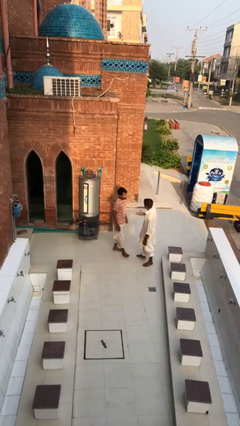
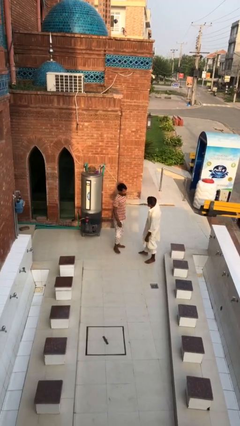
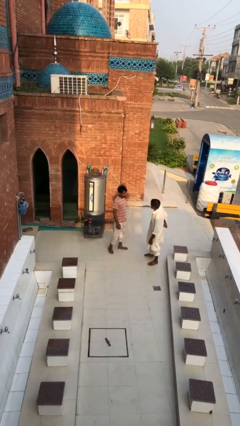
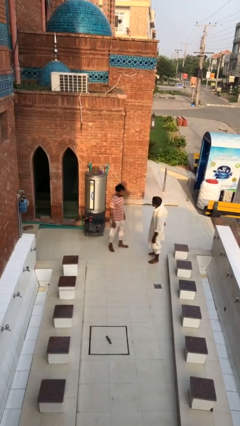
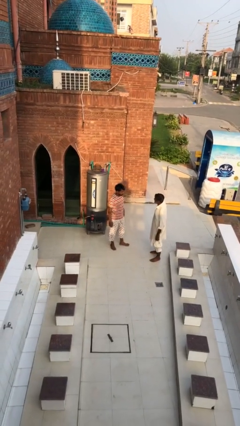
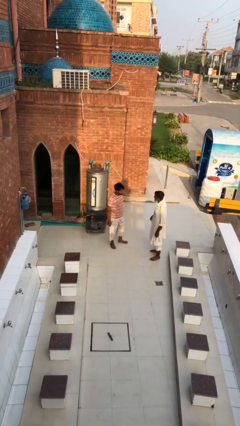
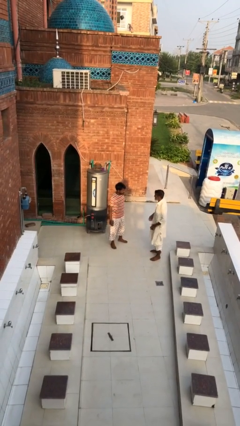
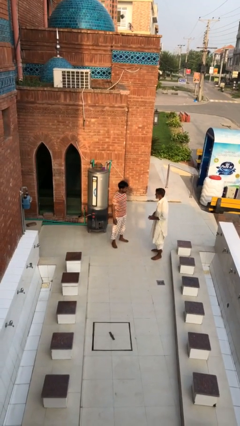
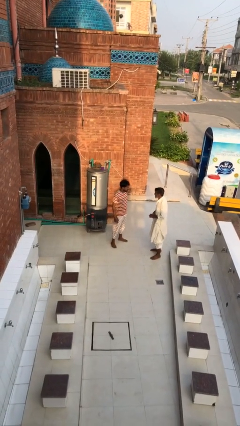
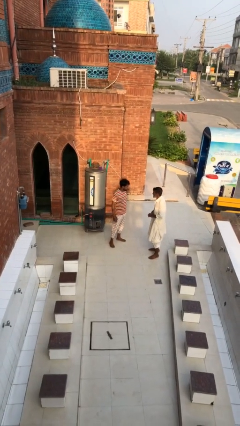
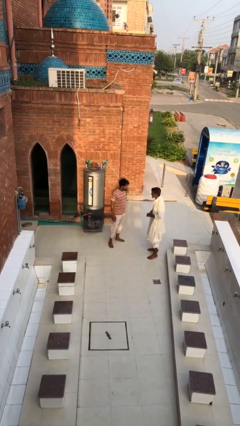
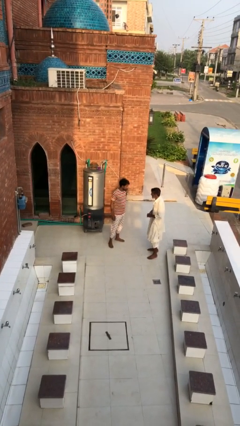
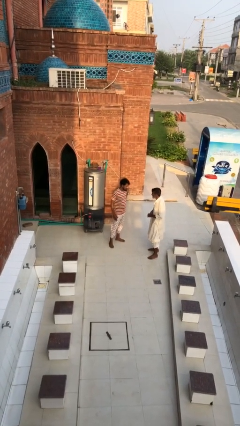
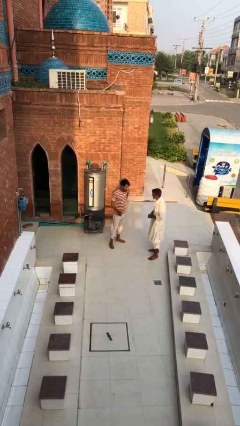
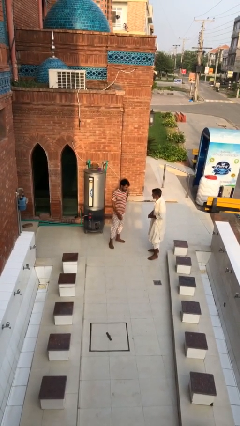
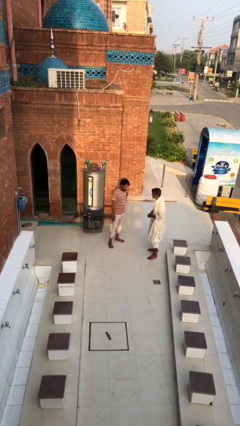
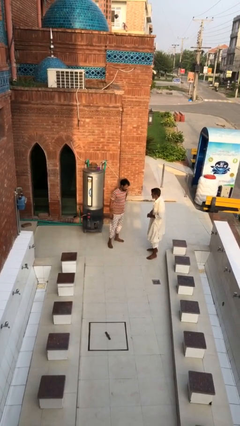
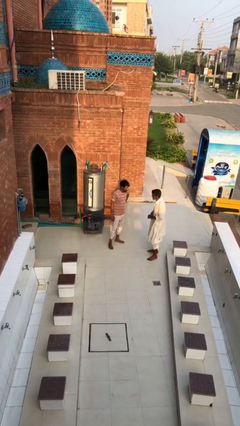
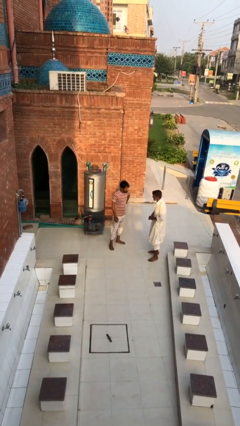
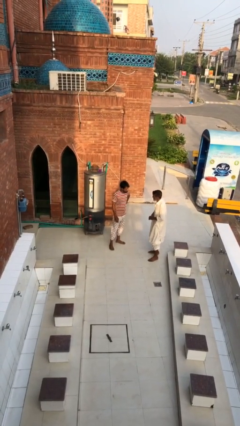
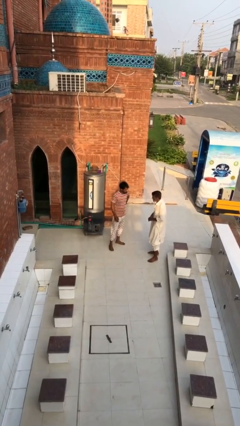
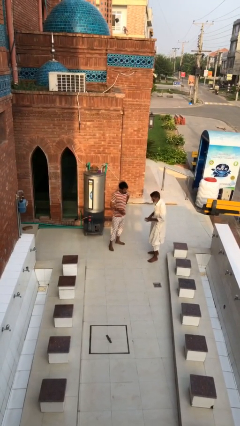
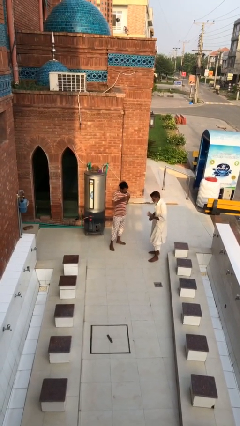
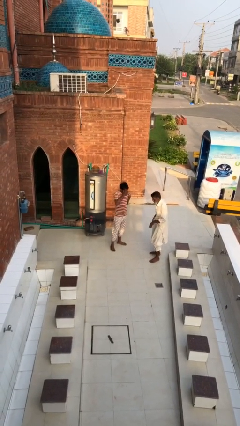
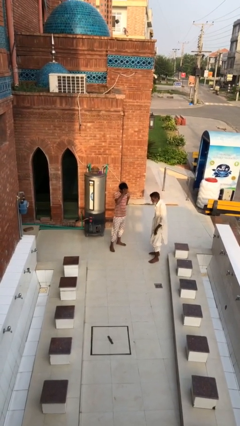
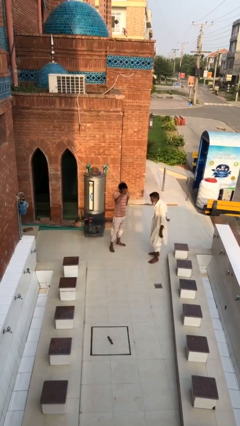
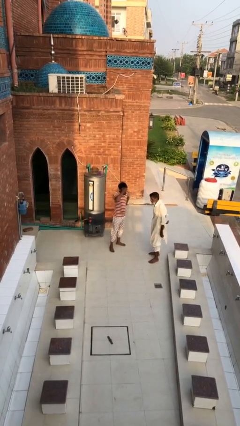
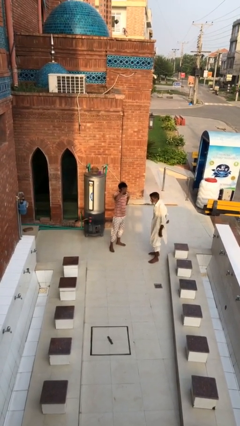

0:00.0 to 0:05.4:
person talks to person

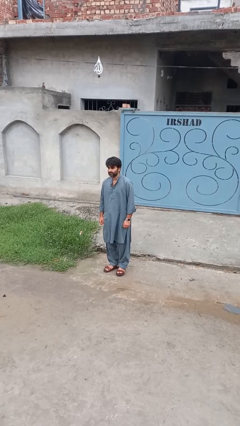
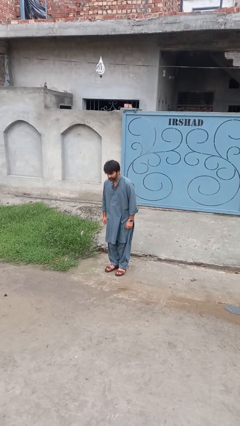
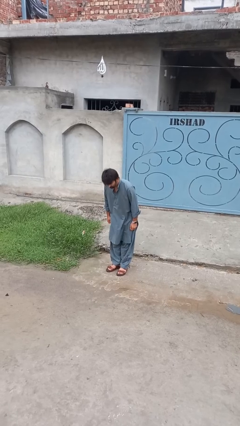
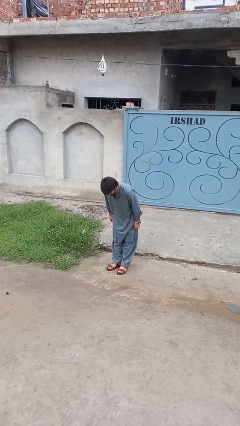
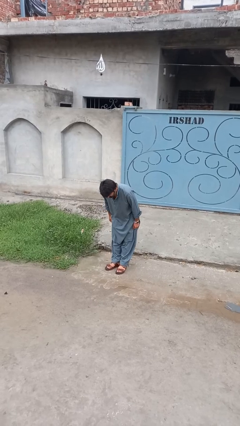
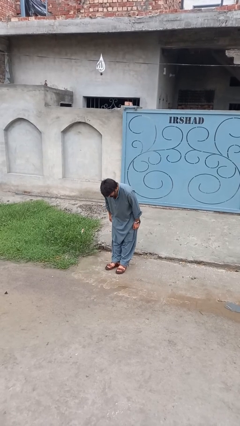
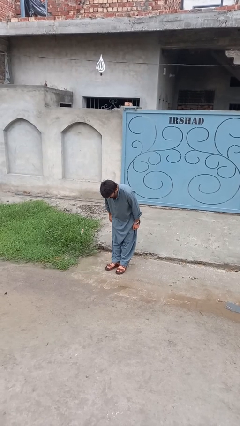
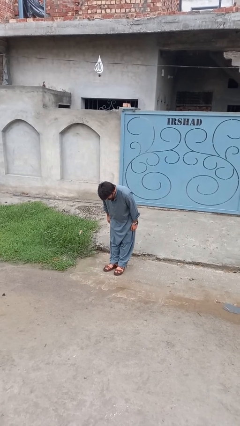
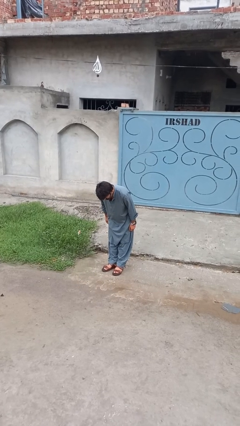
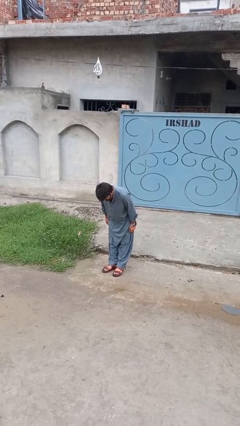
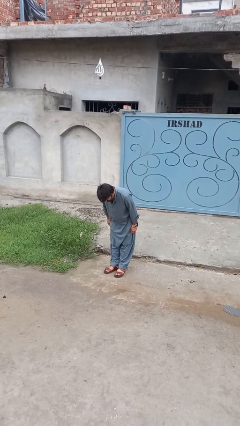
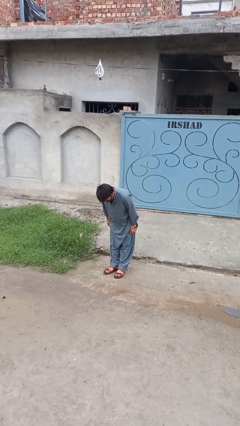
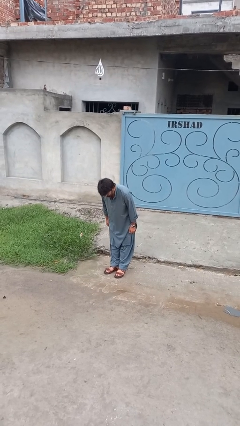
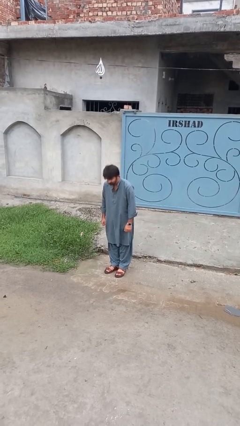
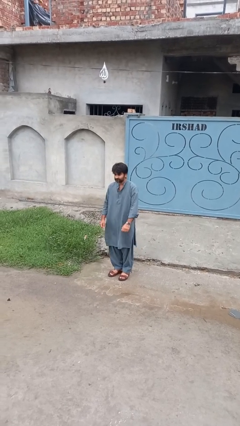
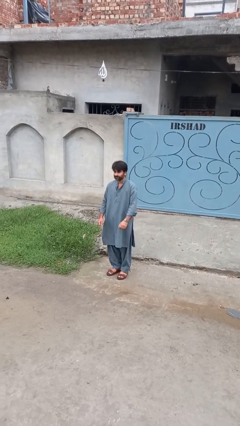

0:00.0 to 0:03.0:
person bows

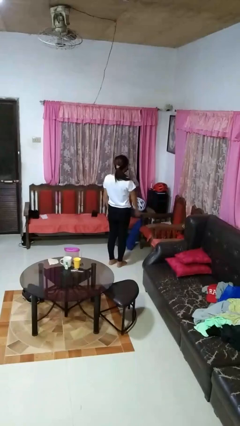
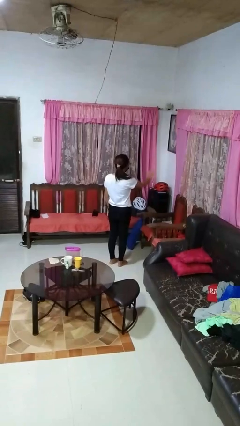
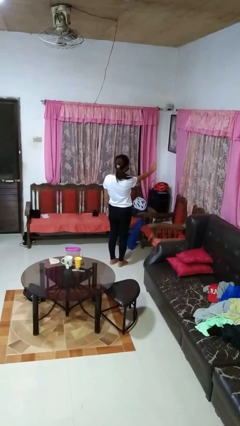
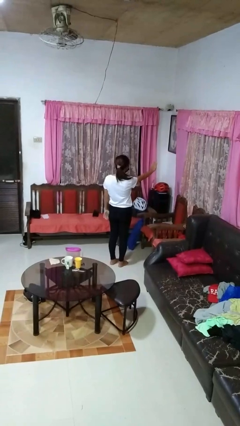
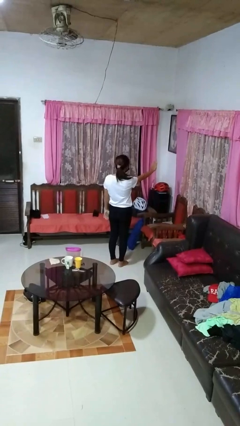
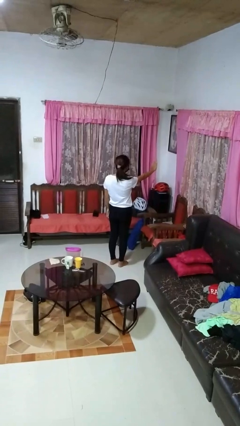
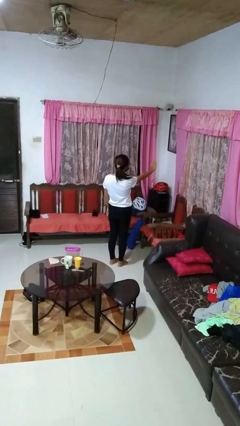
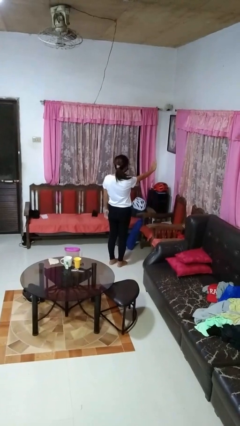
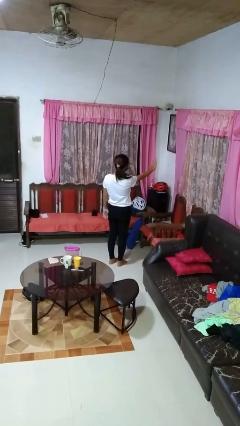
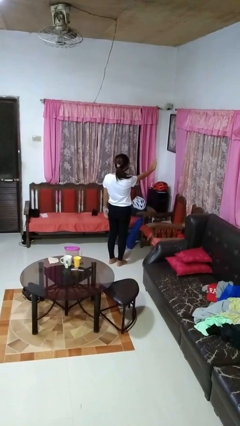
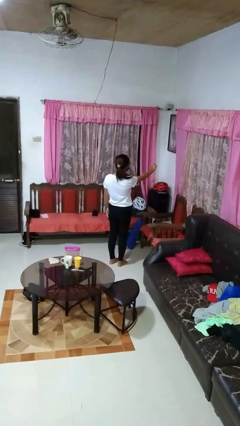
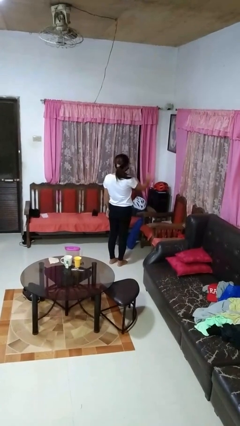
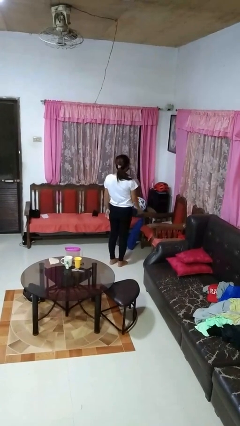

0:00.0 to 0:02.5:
person gestures stop

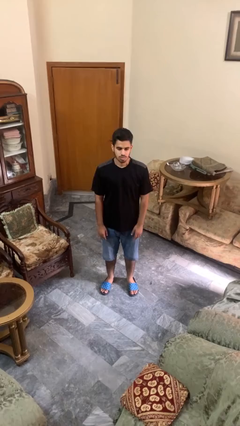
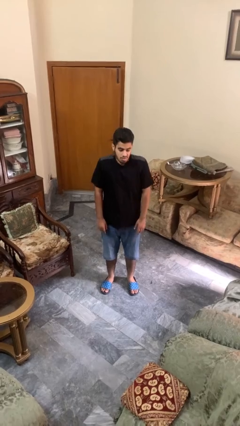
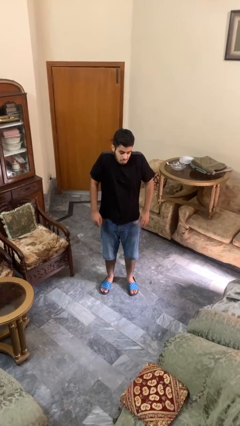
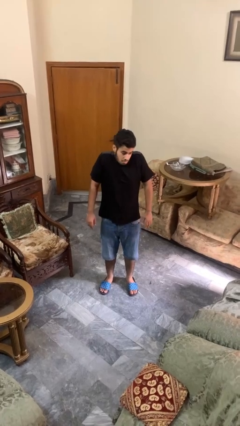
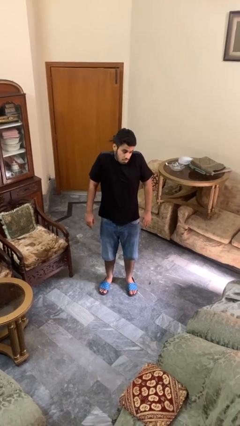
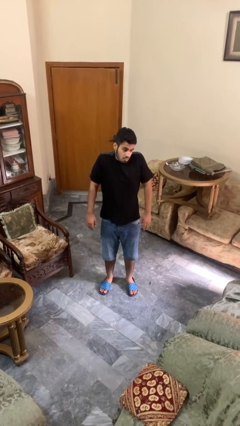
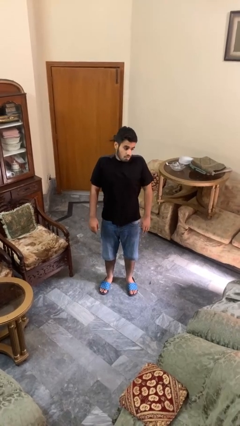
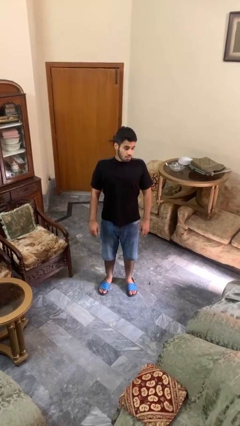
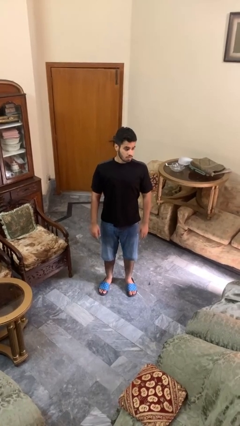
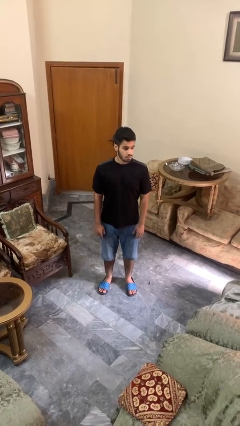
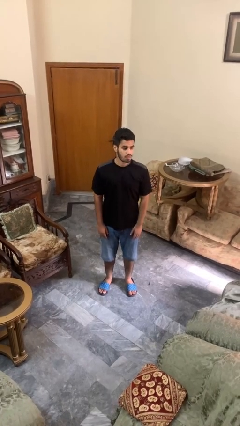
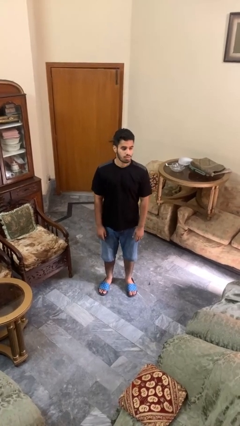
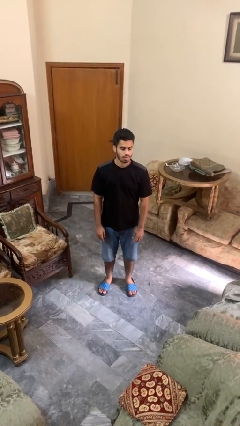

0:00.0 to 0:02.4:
person shrugs

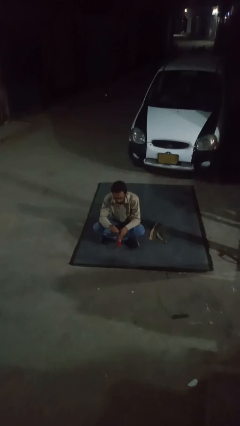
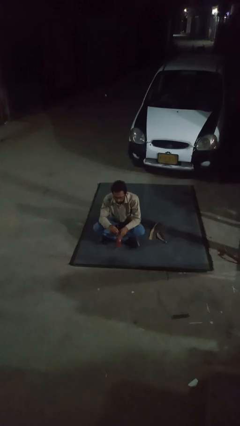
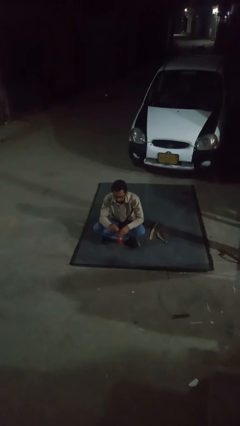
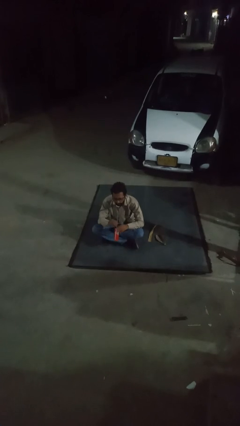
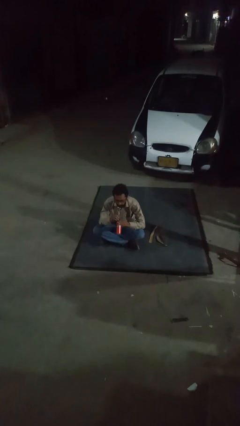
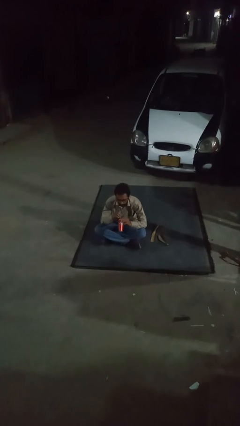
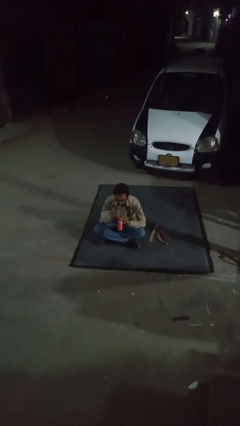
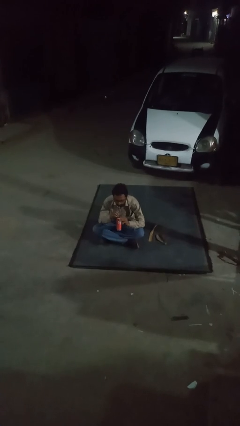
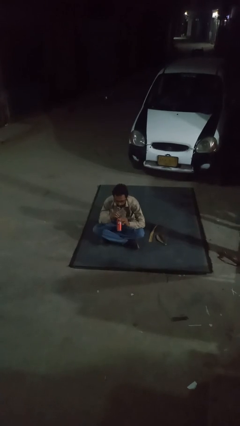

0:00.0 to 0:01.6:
person drinks from straw

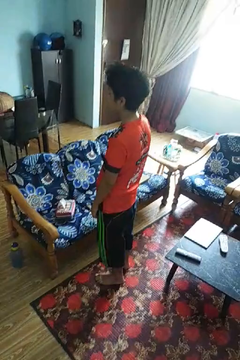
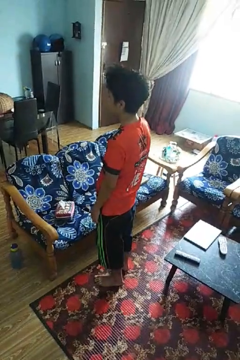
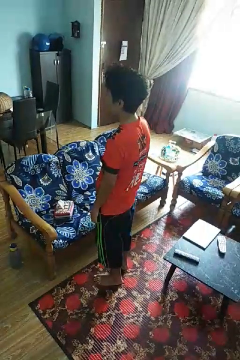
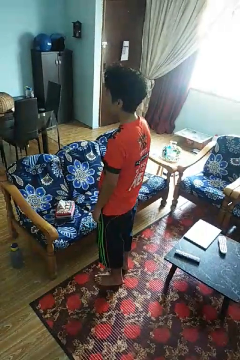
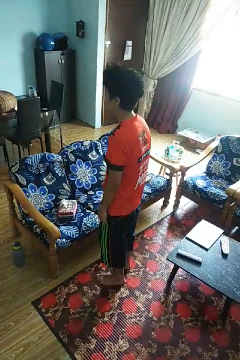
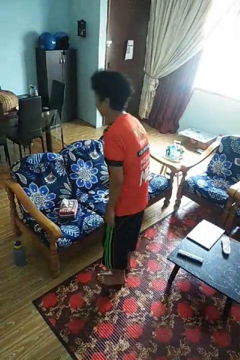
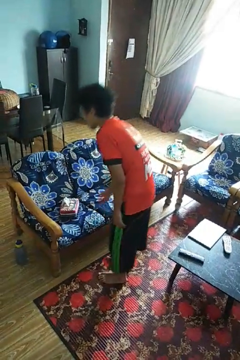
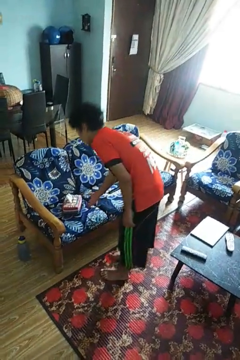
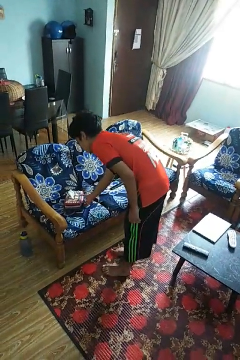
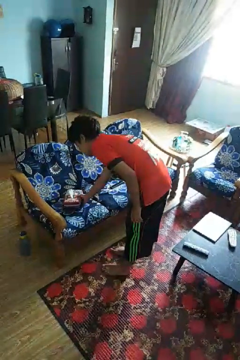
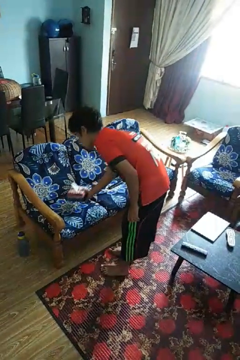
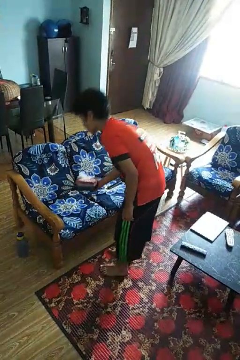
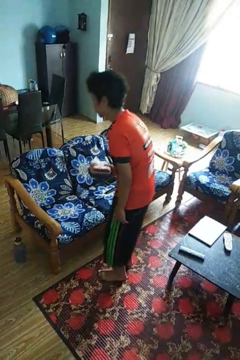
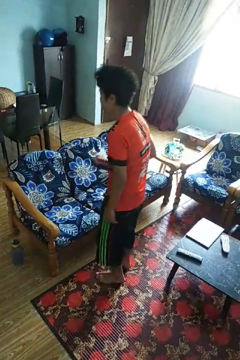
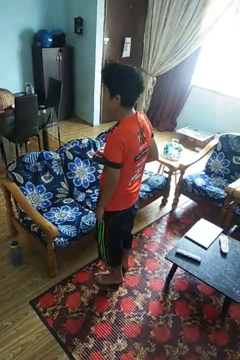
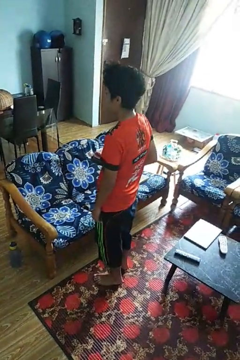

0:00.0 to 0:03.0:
person picks up object from couch
